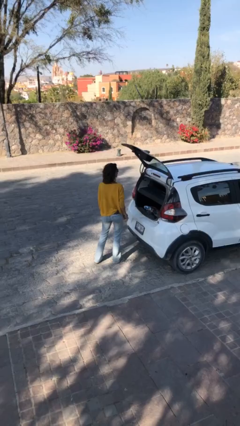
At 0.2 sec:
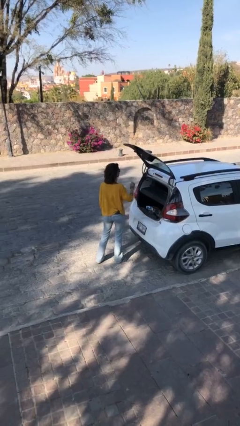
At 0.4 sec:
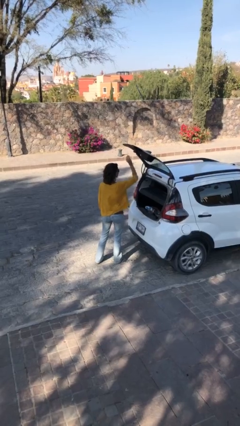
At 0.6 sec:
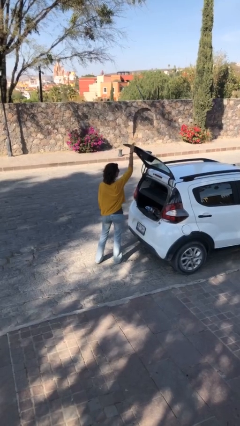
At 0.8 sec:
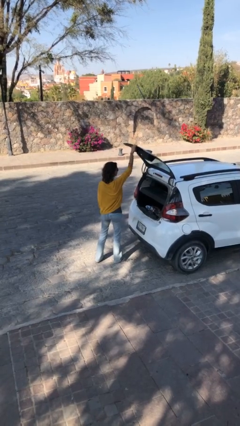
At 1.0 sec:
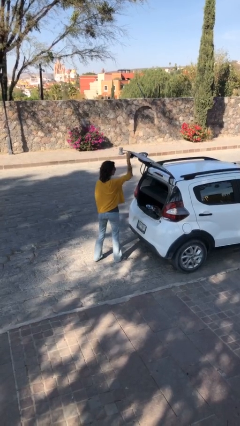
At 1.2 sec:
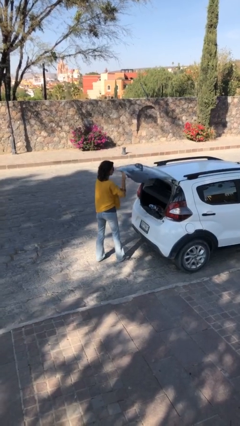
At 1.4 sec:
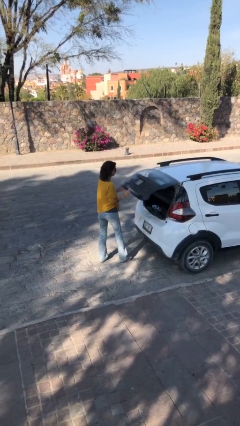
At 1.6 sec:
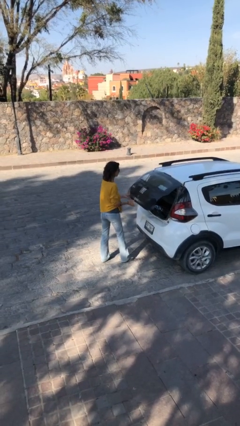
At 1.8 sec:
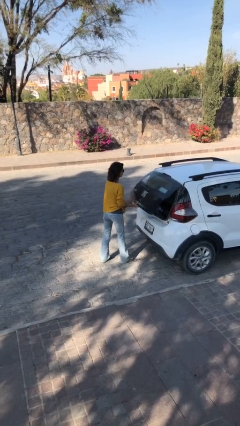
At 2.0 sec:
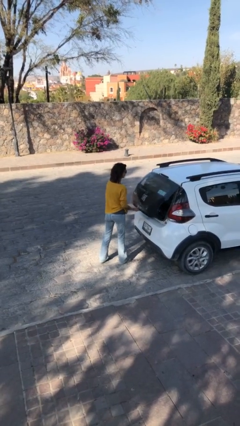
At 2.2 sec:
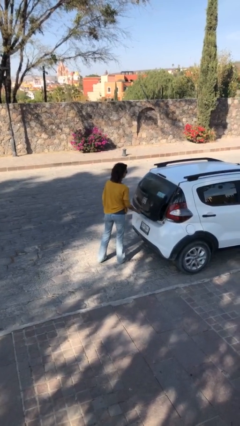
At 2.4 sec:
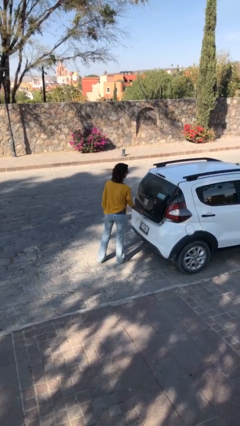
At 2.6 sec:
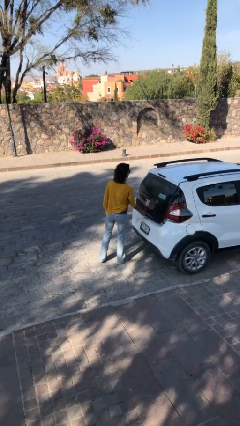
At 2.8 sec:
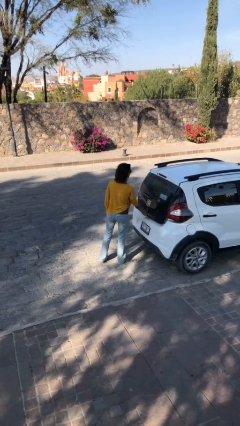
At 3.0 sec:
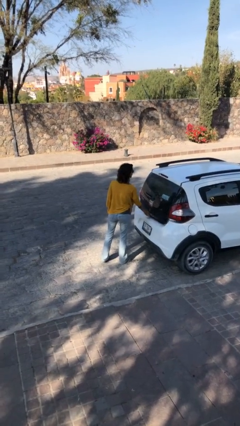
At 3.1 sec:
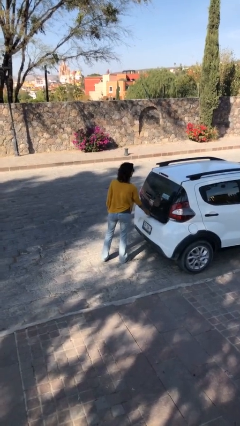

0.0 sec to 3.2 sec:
person closes car trunk

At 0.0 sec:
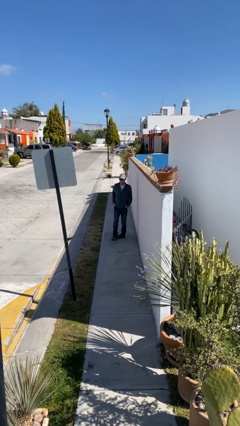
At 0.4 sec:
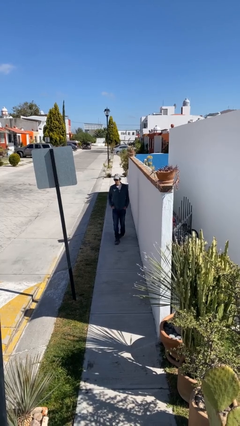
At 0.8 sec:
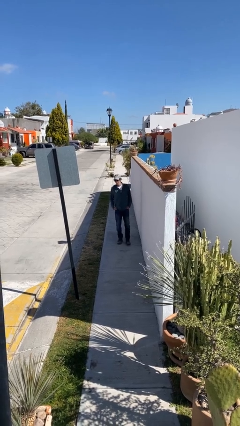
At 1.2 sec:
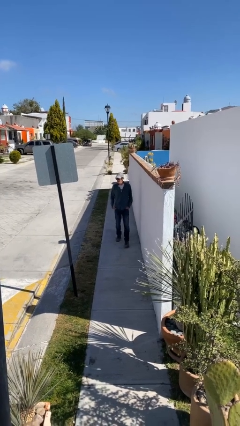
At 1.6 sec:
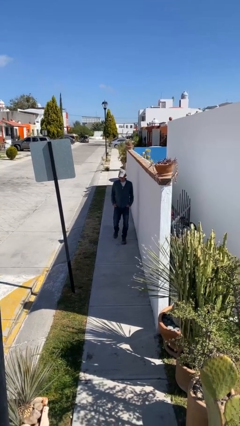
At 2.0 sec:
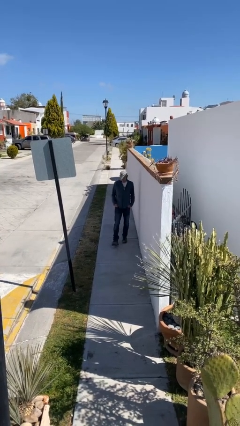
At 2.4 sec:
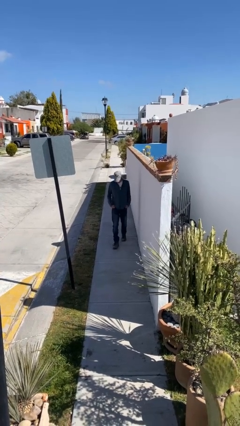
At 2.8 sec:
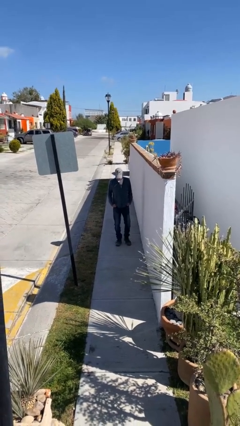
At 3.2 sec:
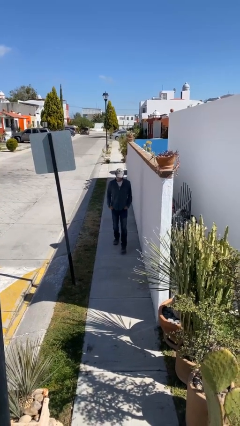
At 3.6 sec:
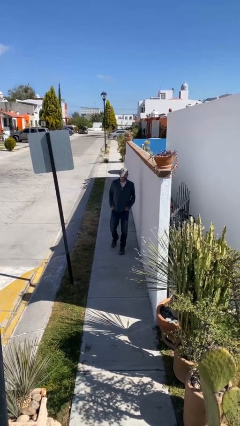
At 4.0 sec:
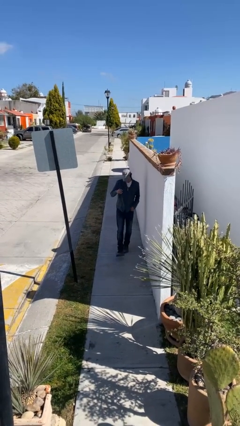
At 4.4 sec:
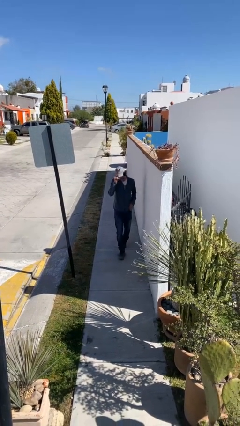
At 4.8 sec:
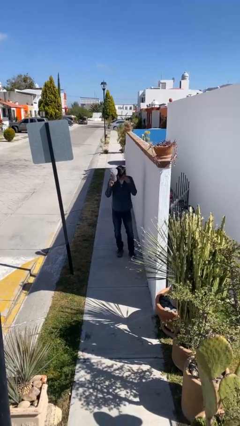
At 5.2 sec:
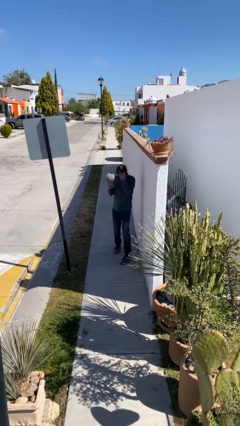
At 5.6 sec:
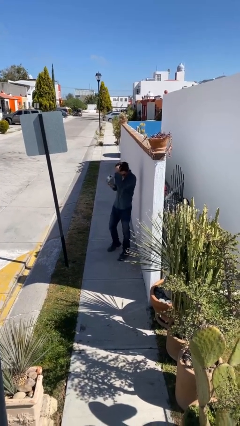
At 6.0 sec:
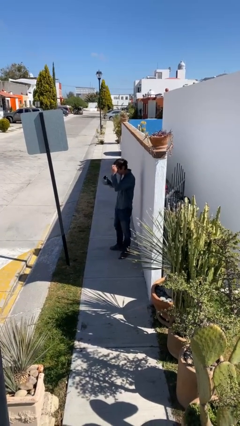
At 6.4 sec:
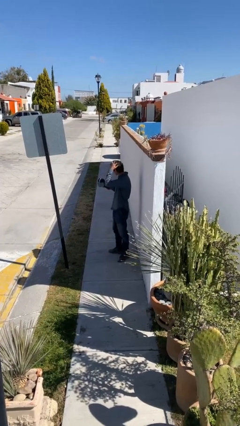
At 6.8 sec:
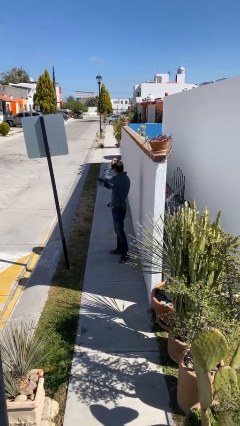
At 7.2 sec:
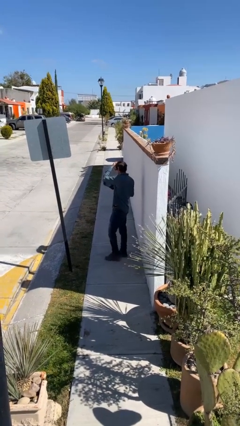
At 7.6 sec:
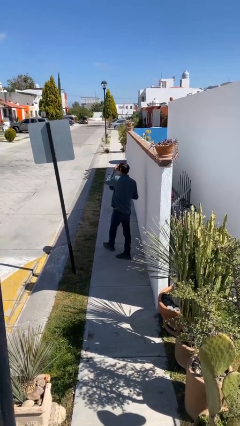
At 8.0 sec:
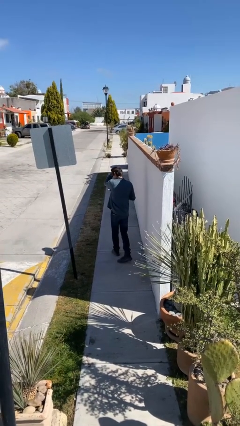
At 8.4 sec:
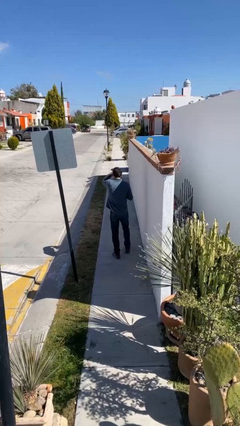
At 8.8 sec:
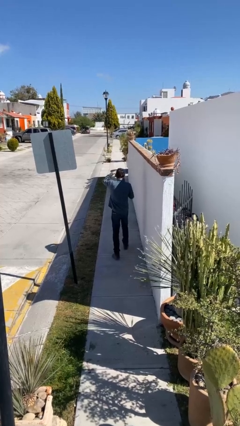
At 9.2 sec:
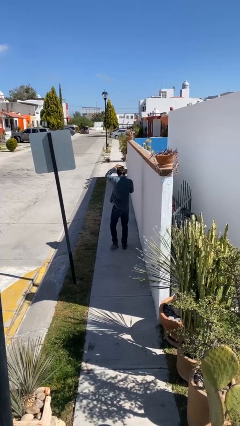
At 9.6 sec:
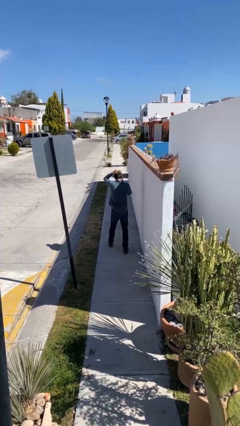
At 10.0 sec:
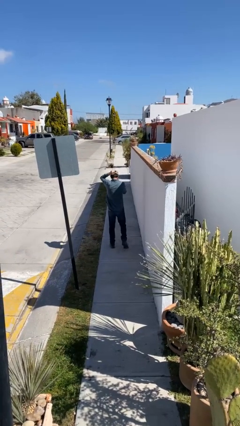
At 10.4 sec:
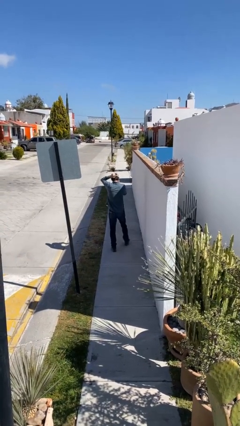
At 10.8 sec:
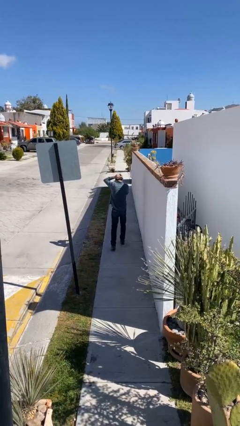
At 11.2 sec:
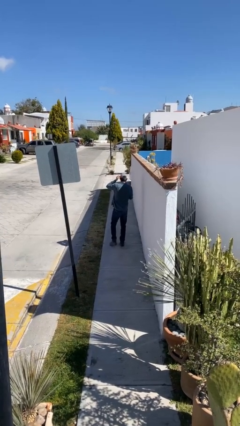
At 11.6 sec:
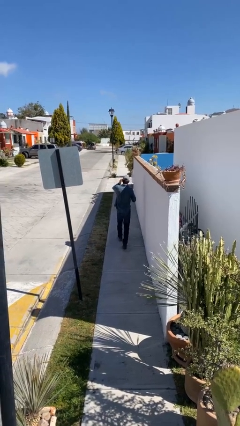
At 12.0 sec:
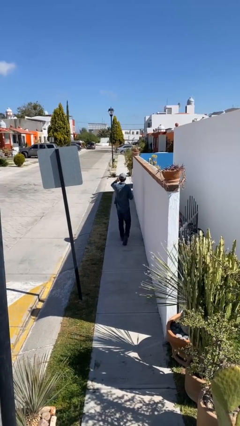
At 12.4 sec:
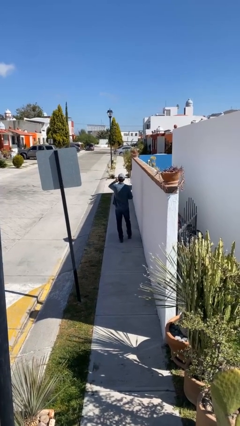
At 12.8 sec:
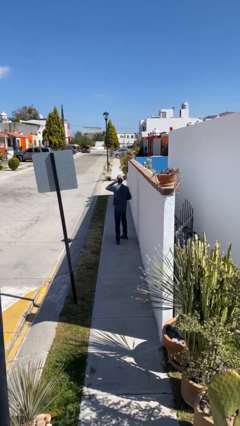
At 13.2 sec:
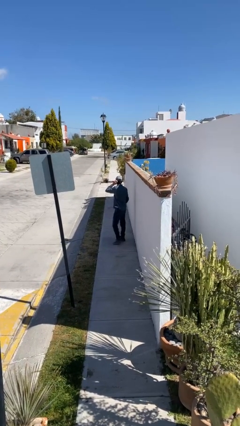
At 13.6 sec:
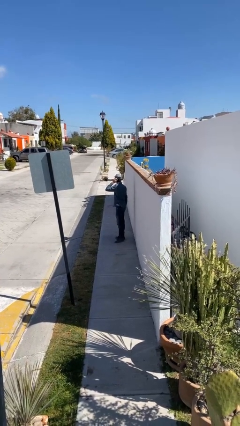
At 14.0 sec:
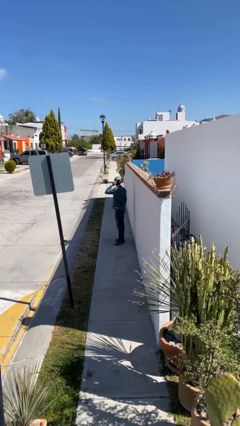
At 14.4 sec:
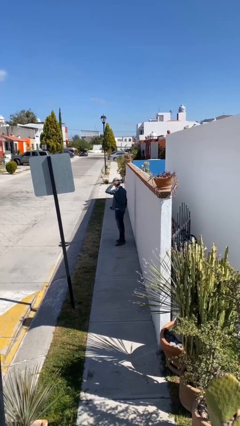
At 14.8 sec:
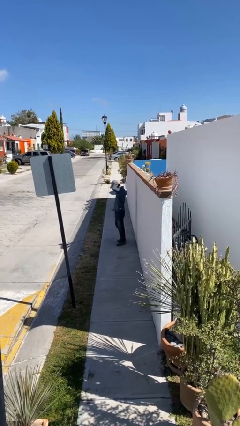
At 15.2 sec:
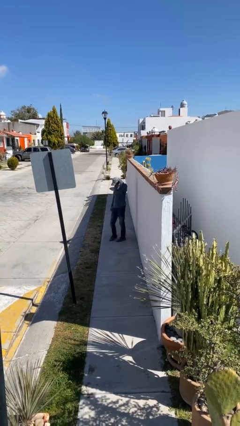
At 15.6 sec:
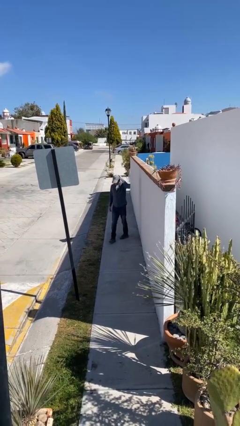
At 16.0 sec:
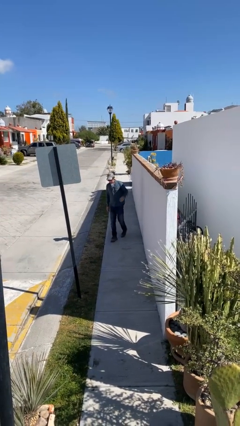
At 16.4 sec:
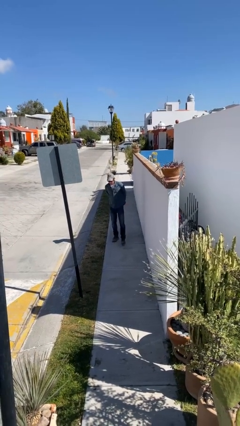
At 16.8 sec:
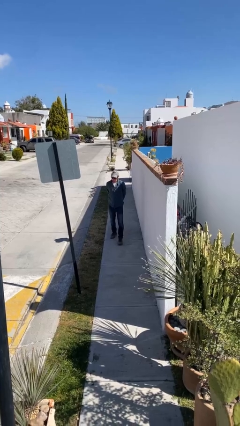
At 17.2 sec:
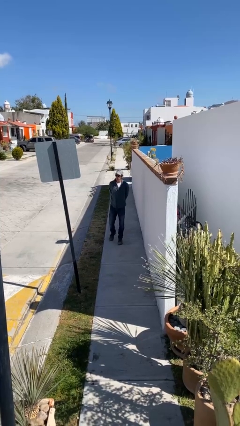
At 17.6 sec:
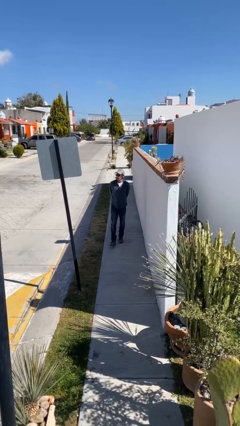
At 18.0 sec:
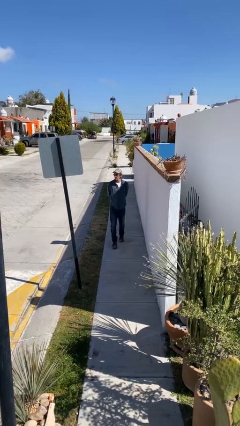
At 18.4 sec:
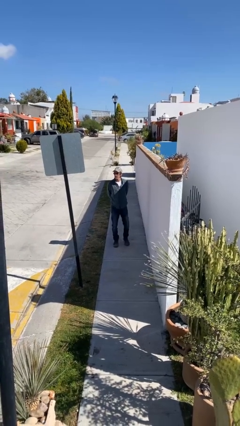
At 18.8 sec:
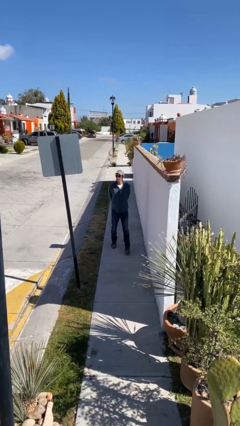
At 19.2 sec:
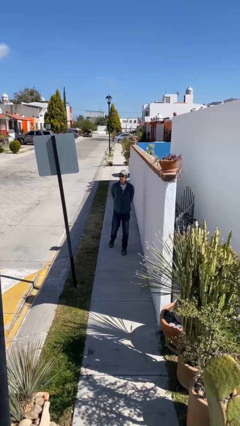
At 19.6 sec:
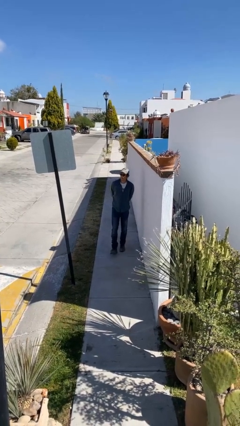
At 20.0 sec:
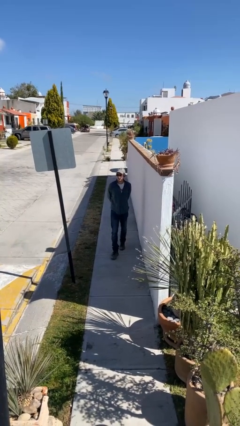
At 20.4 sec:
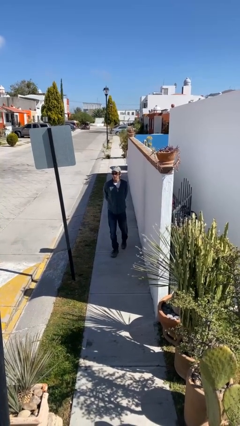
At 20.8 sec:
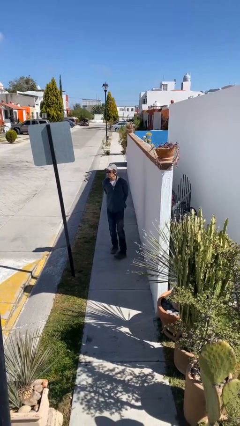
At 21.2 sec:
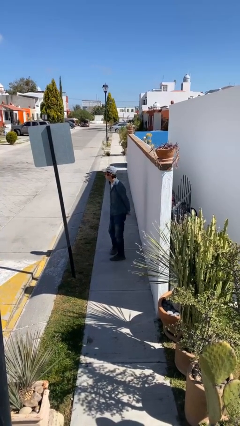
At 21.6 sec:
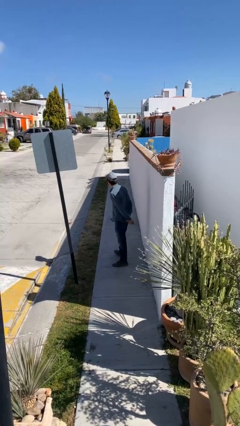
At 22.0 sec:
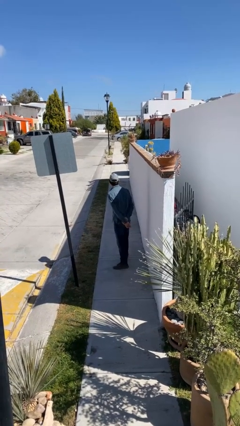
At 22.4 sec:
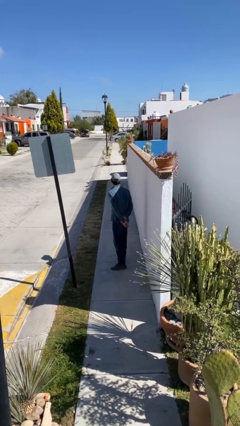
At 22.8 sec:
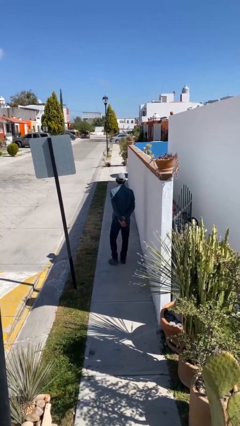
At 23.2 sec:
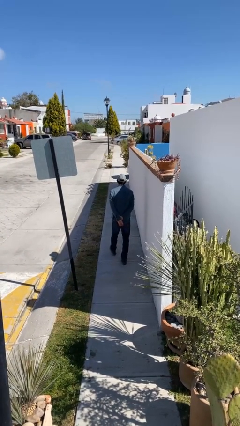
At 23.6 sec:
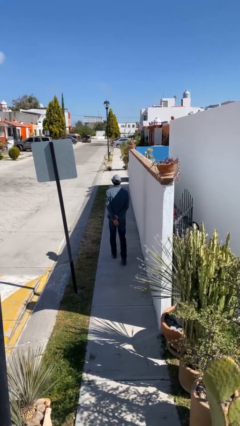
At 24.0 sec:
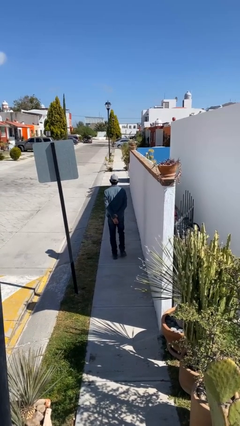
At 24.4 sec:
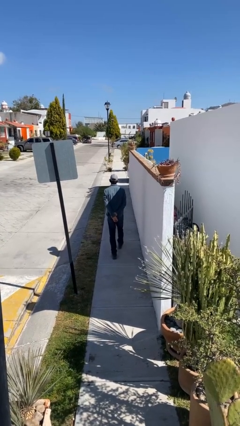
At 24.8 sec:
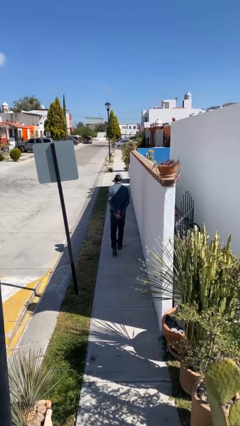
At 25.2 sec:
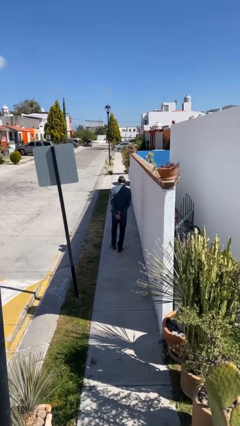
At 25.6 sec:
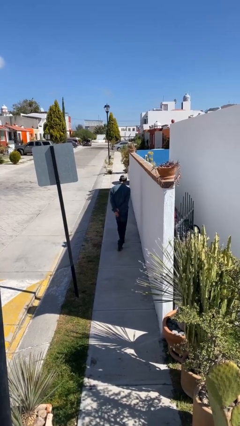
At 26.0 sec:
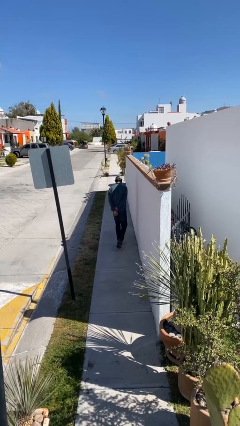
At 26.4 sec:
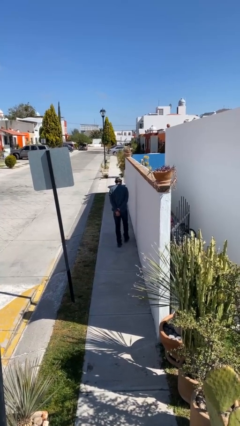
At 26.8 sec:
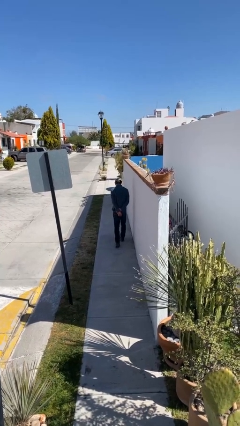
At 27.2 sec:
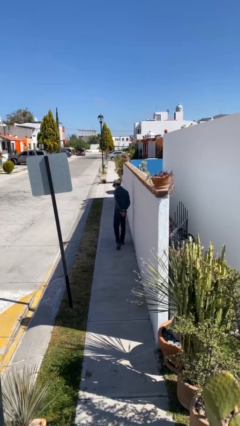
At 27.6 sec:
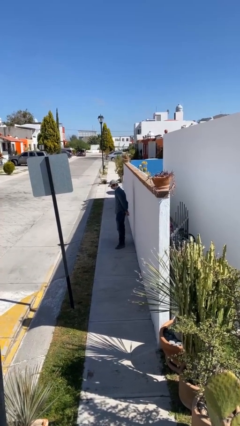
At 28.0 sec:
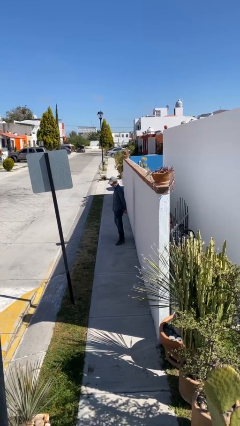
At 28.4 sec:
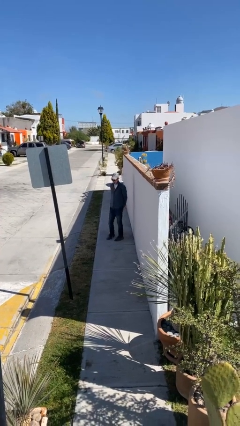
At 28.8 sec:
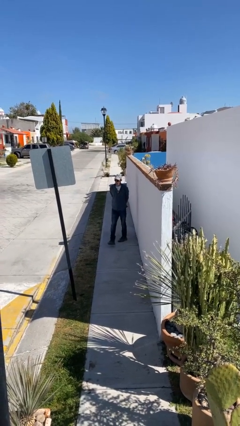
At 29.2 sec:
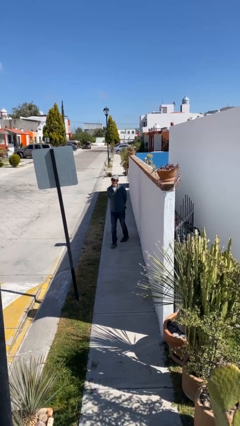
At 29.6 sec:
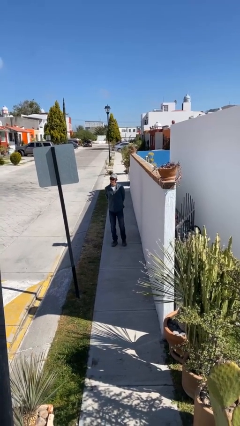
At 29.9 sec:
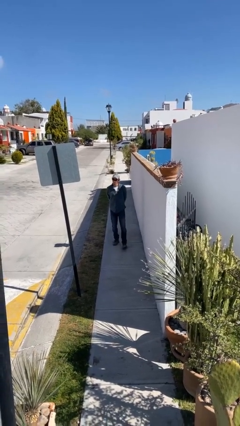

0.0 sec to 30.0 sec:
person walks
